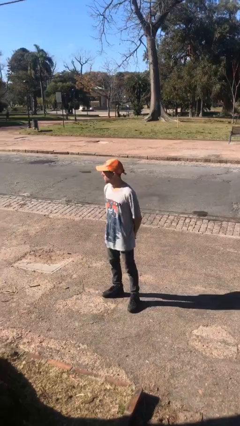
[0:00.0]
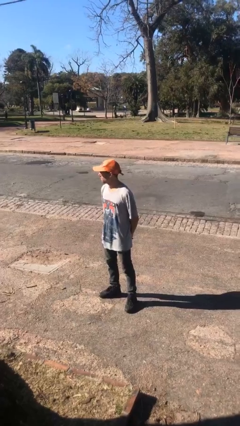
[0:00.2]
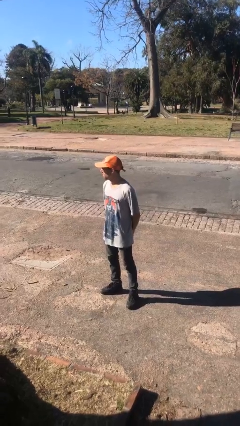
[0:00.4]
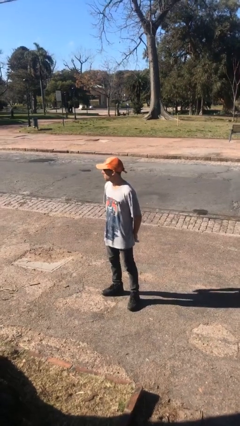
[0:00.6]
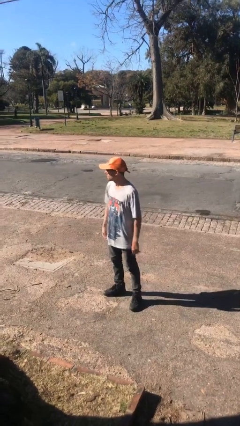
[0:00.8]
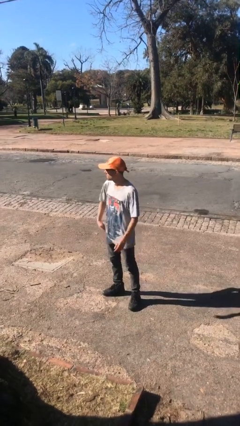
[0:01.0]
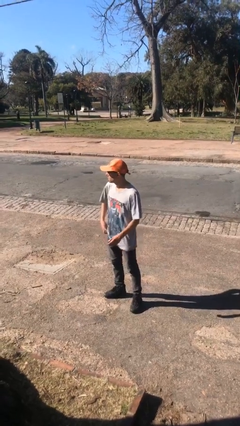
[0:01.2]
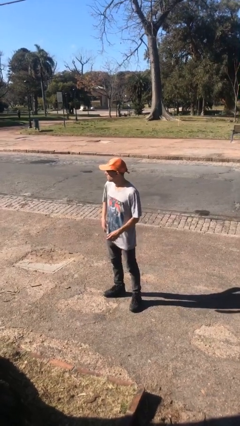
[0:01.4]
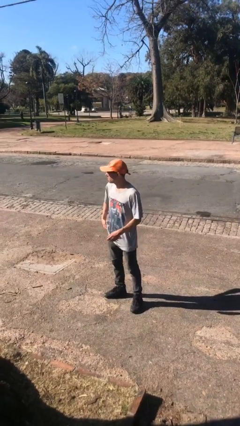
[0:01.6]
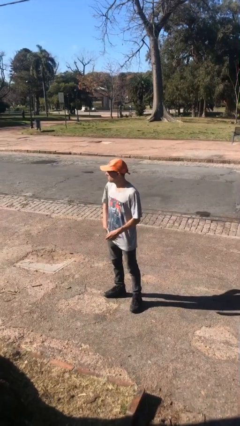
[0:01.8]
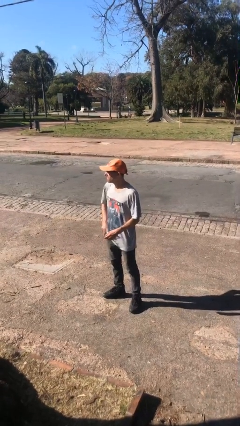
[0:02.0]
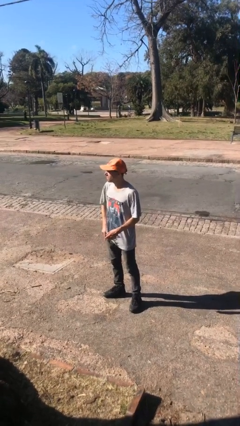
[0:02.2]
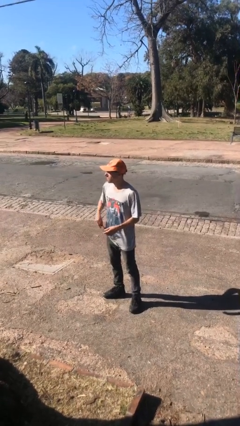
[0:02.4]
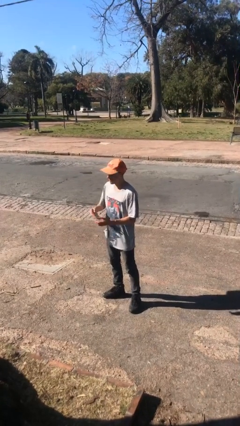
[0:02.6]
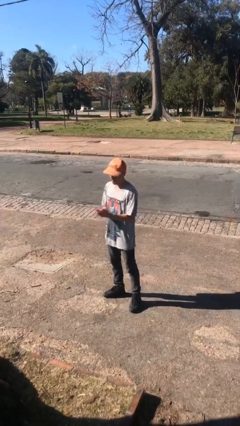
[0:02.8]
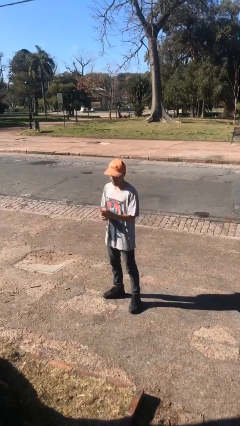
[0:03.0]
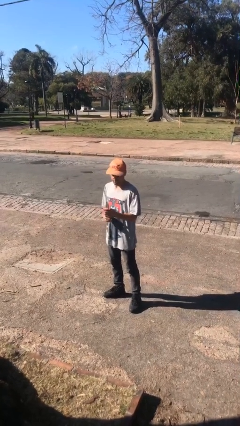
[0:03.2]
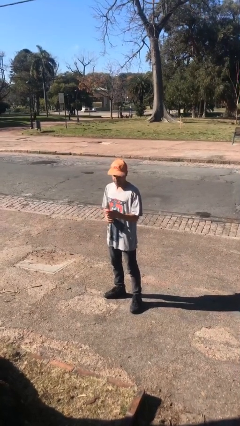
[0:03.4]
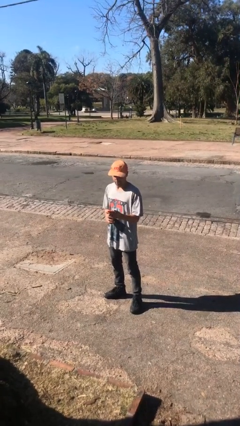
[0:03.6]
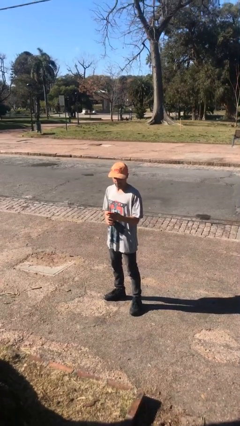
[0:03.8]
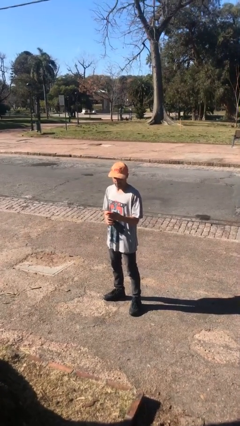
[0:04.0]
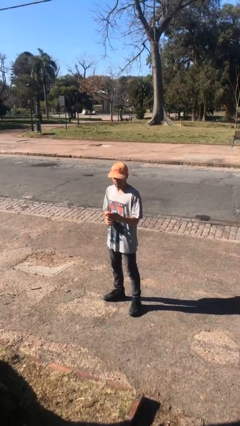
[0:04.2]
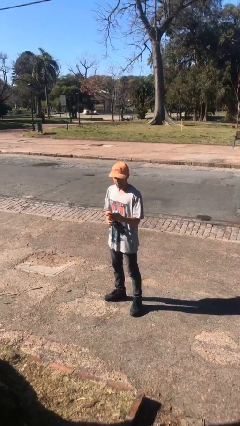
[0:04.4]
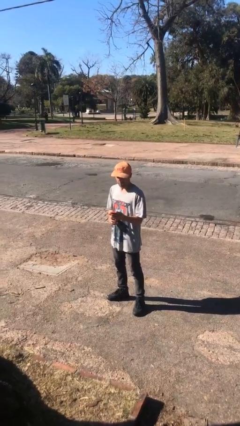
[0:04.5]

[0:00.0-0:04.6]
person takes phone from pocket

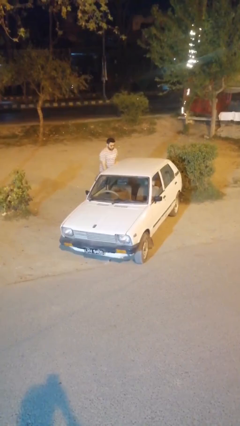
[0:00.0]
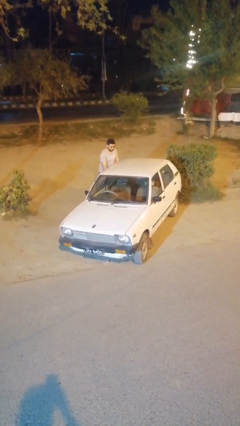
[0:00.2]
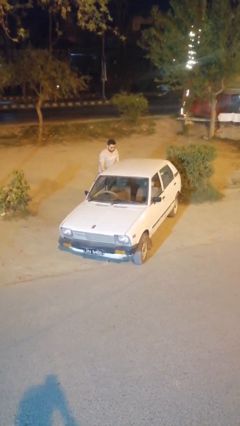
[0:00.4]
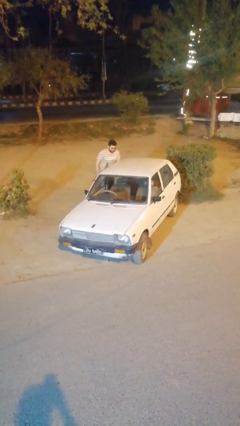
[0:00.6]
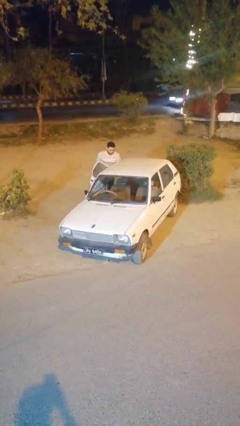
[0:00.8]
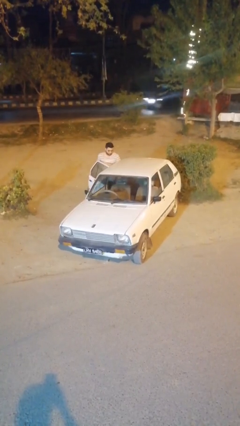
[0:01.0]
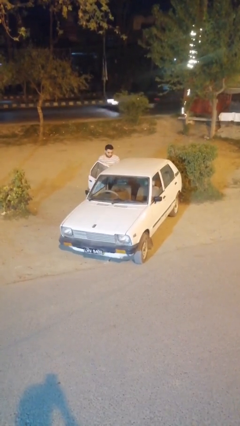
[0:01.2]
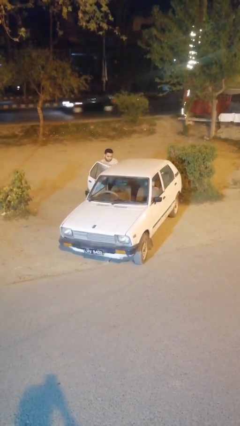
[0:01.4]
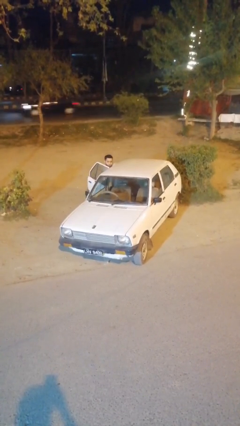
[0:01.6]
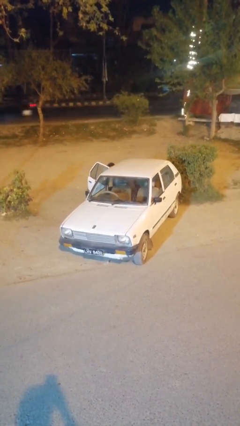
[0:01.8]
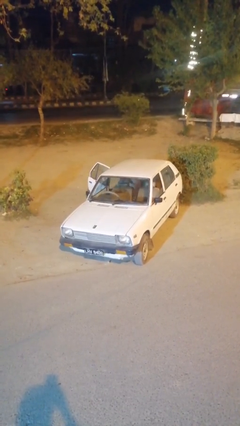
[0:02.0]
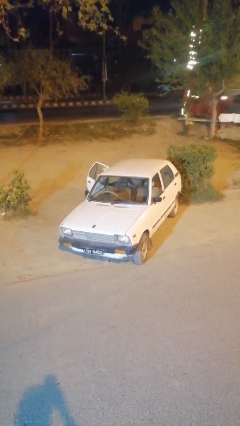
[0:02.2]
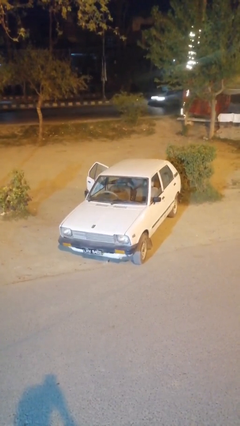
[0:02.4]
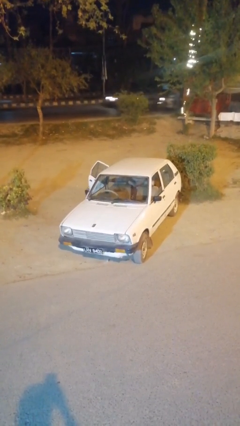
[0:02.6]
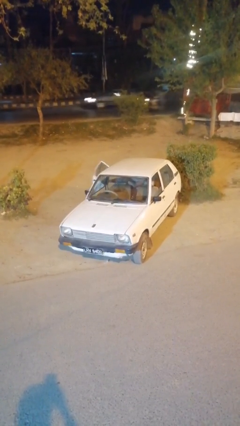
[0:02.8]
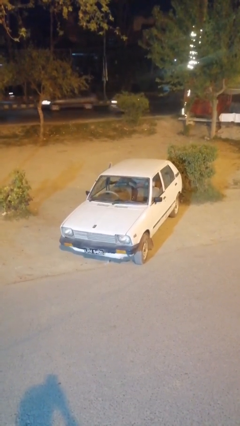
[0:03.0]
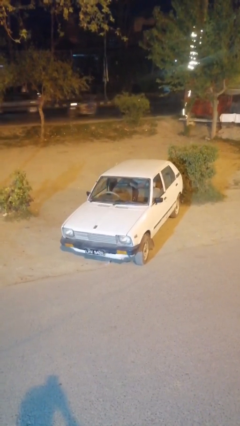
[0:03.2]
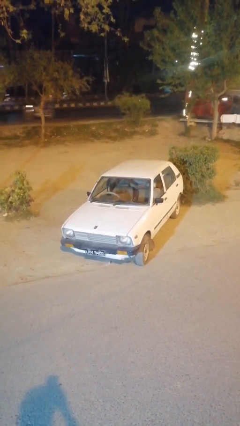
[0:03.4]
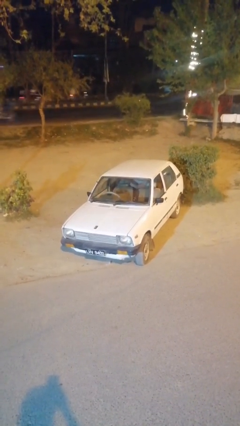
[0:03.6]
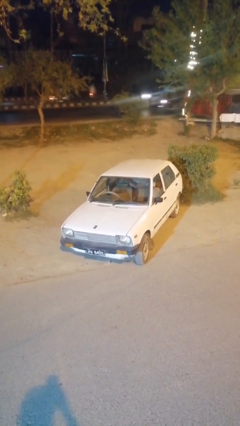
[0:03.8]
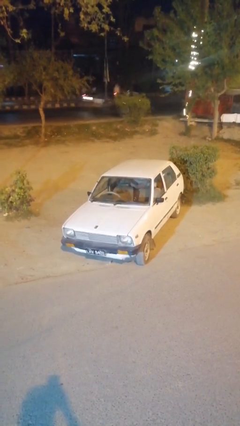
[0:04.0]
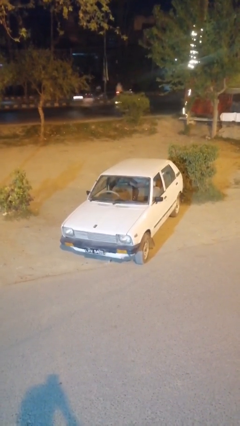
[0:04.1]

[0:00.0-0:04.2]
car picks up person

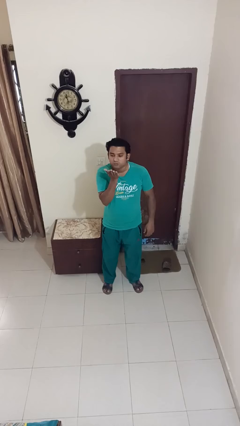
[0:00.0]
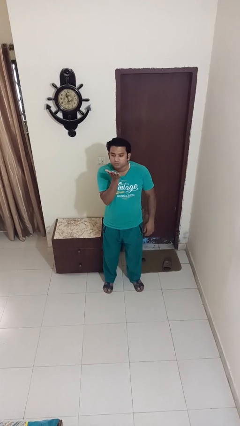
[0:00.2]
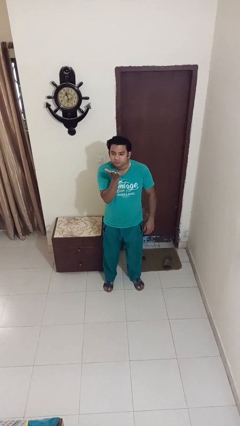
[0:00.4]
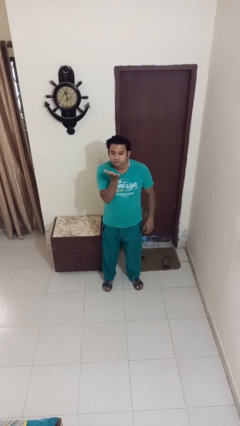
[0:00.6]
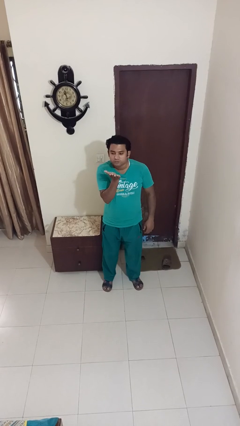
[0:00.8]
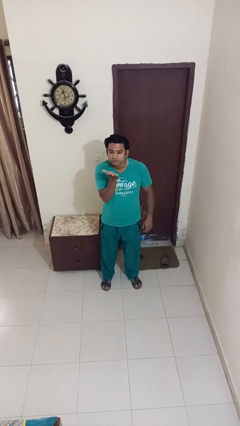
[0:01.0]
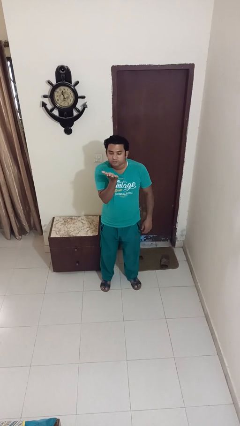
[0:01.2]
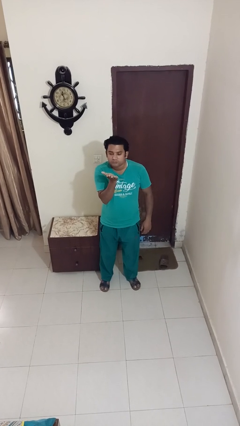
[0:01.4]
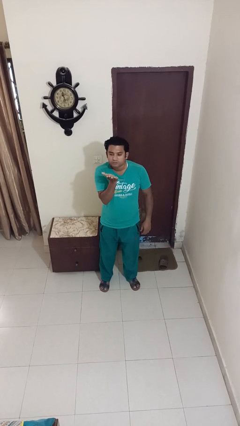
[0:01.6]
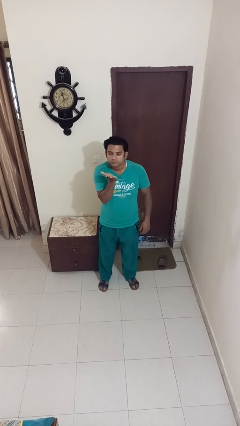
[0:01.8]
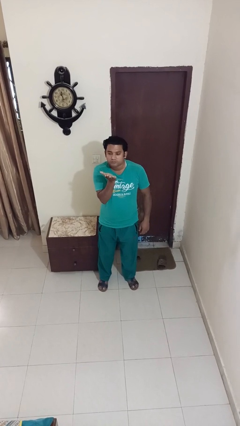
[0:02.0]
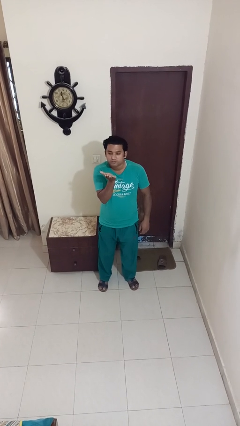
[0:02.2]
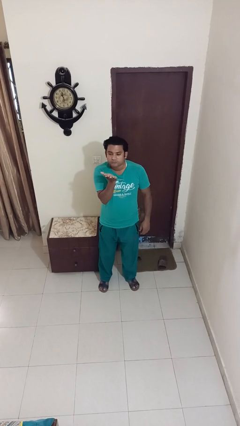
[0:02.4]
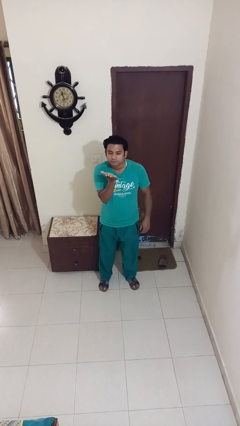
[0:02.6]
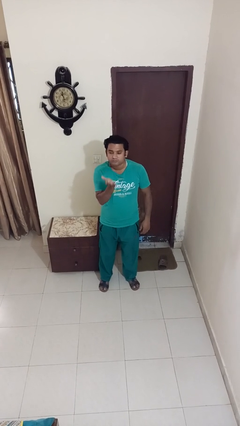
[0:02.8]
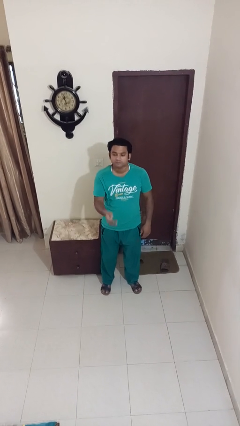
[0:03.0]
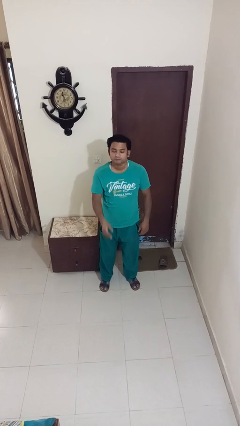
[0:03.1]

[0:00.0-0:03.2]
person gestures blow kiss

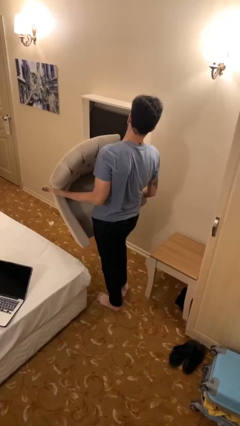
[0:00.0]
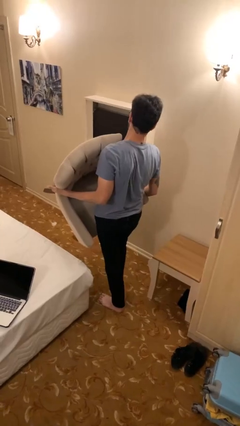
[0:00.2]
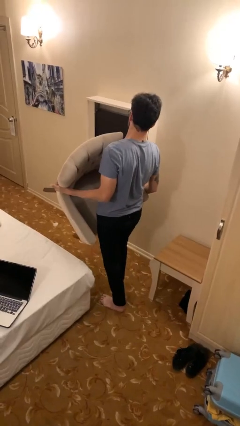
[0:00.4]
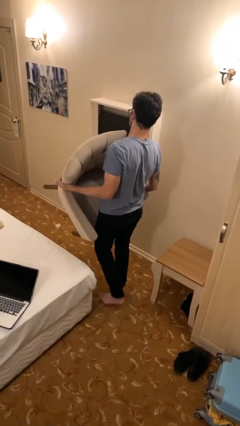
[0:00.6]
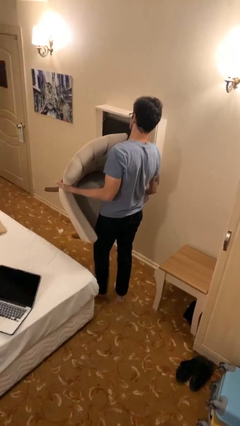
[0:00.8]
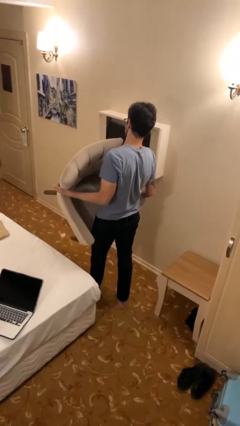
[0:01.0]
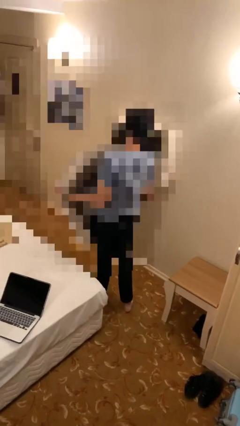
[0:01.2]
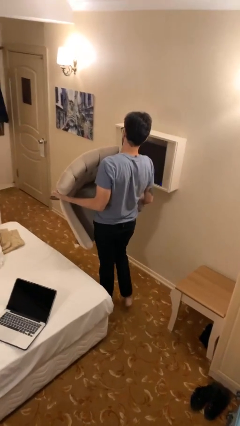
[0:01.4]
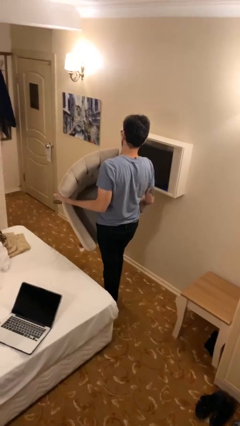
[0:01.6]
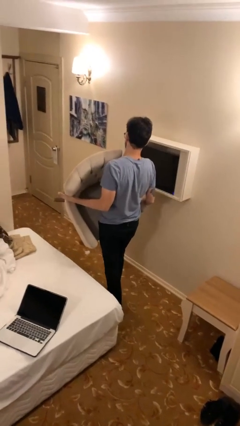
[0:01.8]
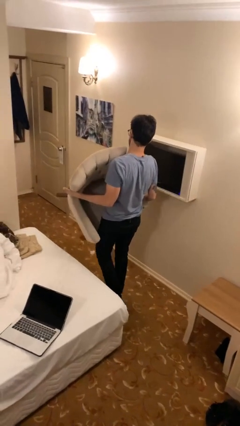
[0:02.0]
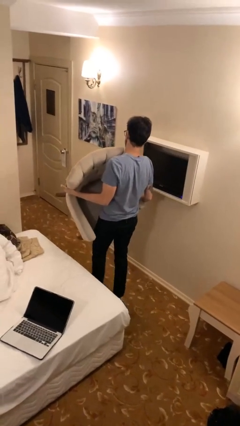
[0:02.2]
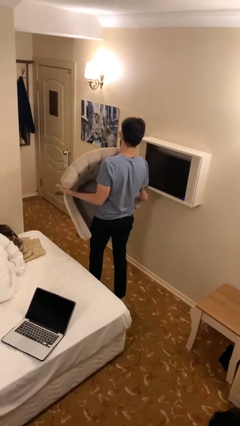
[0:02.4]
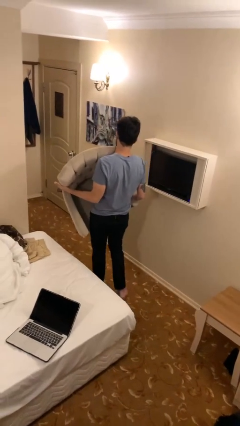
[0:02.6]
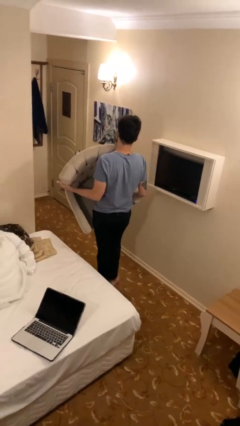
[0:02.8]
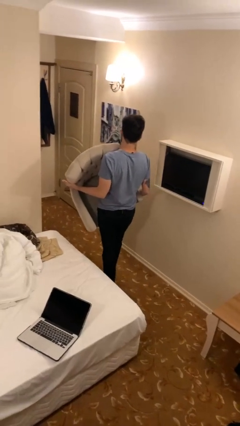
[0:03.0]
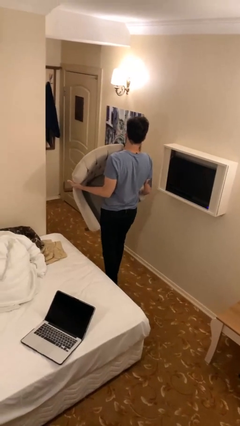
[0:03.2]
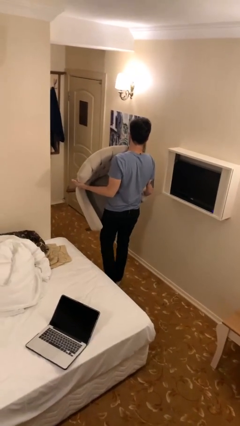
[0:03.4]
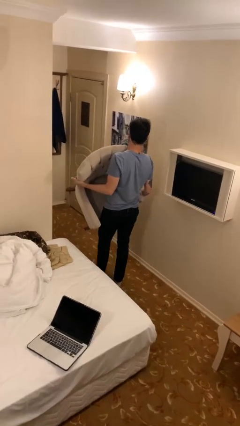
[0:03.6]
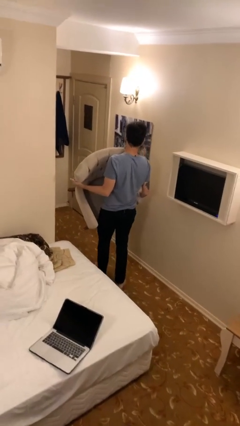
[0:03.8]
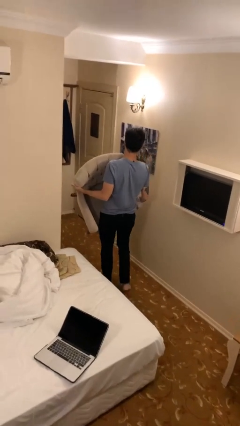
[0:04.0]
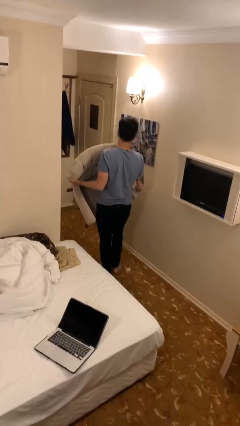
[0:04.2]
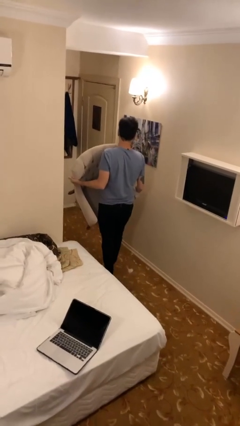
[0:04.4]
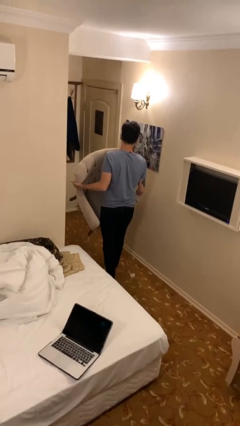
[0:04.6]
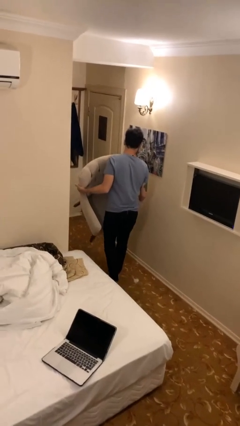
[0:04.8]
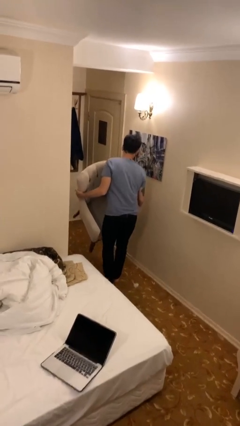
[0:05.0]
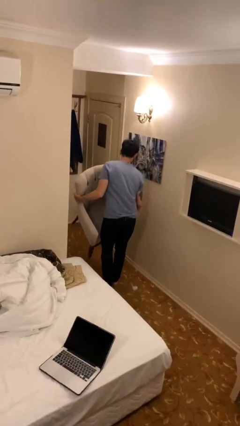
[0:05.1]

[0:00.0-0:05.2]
person carries heavy object

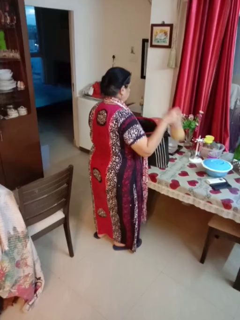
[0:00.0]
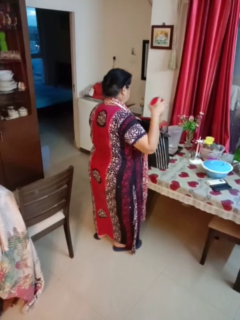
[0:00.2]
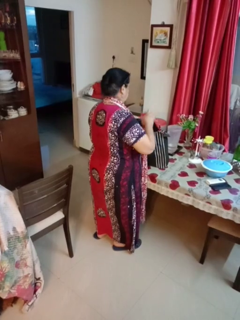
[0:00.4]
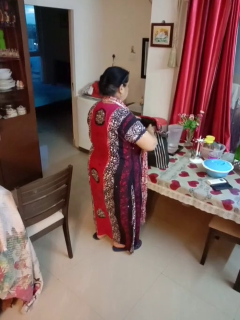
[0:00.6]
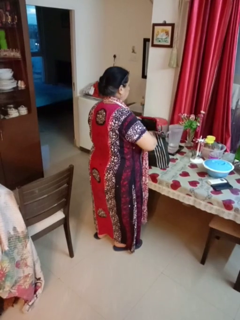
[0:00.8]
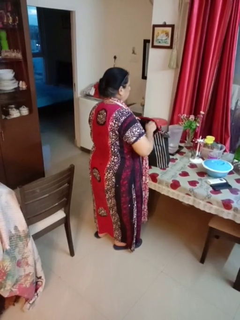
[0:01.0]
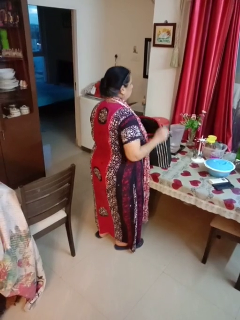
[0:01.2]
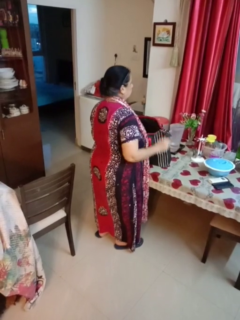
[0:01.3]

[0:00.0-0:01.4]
person puts object into bag
